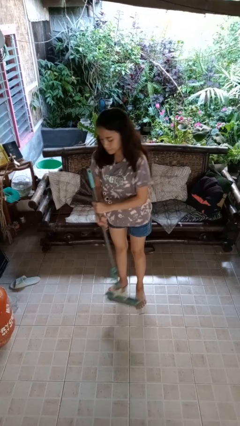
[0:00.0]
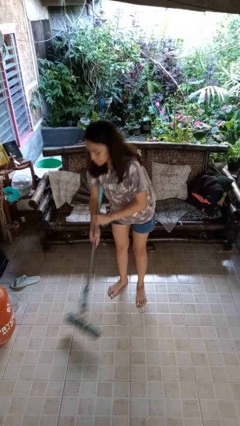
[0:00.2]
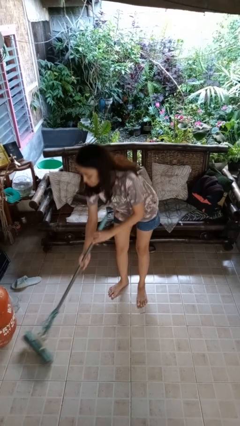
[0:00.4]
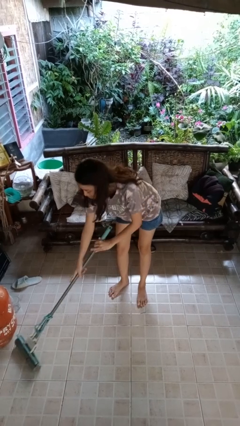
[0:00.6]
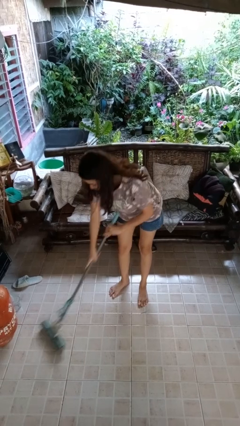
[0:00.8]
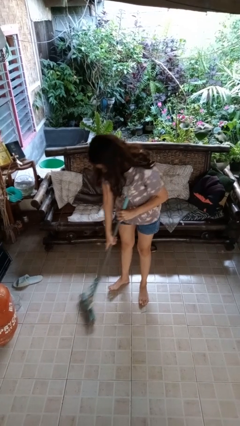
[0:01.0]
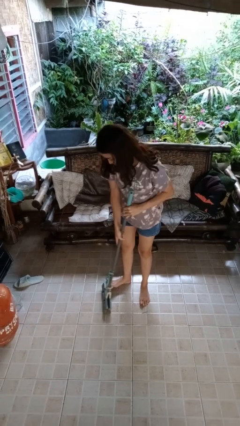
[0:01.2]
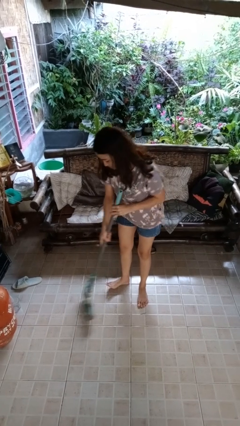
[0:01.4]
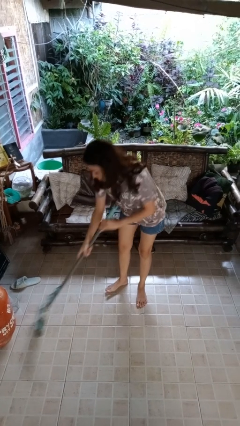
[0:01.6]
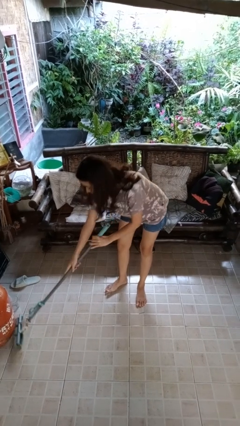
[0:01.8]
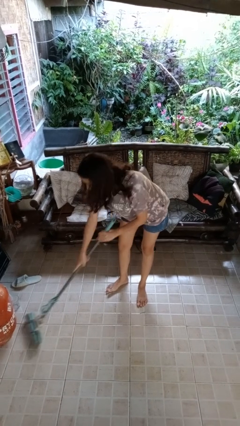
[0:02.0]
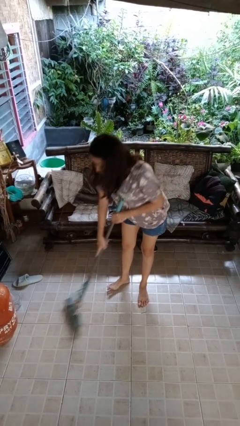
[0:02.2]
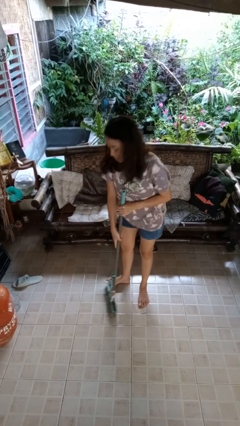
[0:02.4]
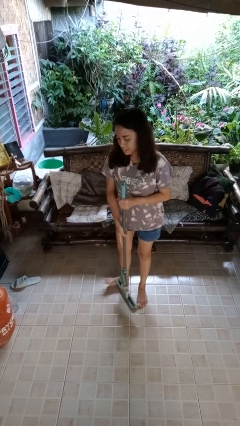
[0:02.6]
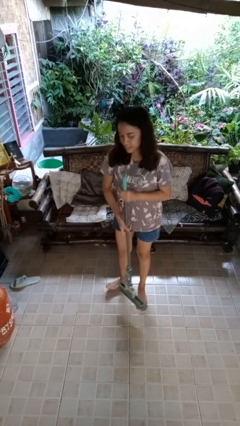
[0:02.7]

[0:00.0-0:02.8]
person mops

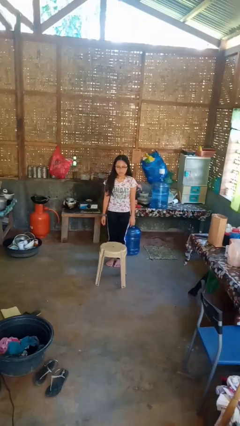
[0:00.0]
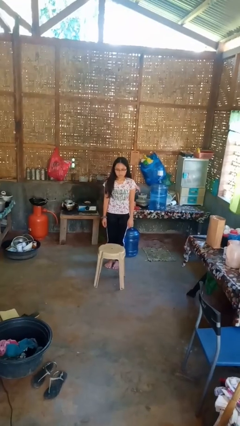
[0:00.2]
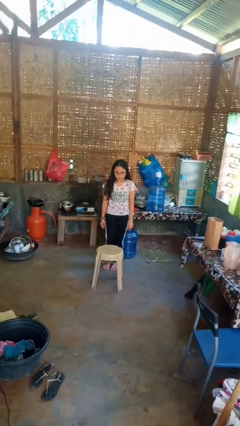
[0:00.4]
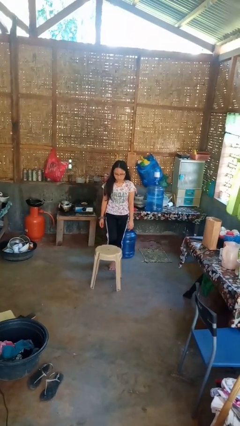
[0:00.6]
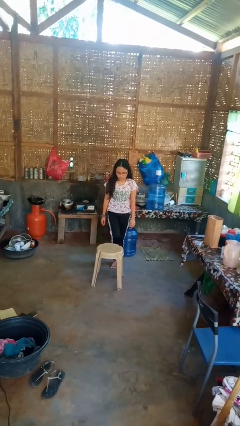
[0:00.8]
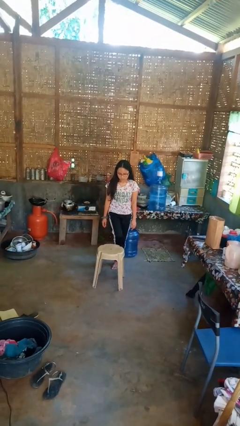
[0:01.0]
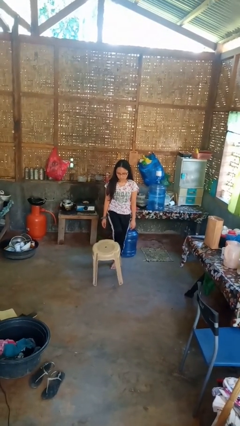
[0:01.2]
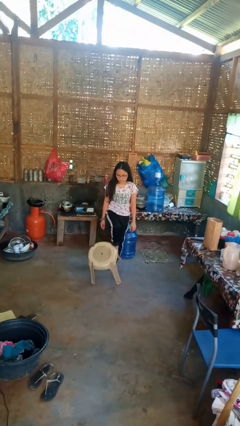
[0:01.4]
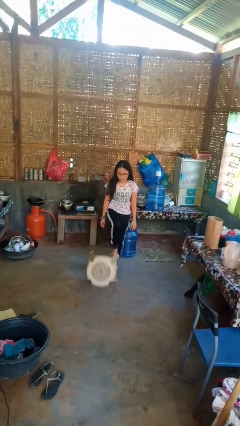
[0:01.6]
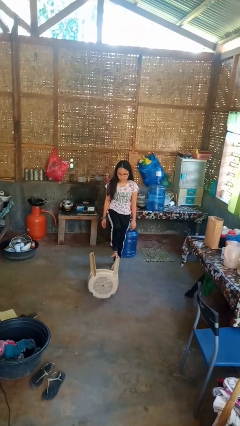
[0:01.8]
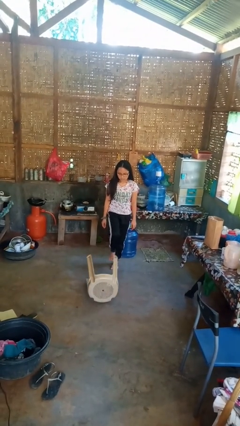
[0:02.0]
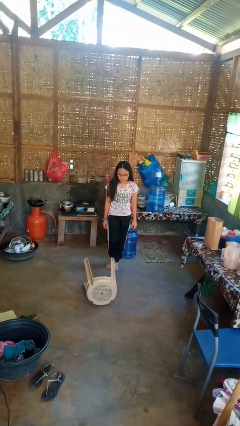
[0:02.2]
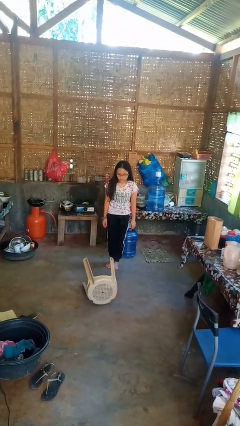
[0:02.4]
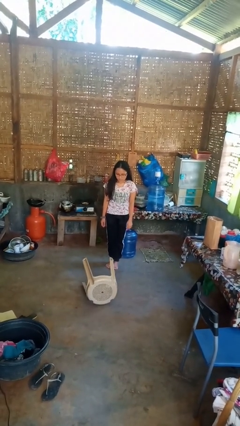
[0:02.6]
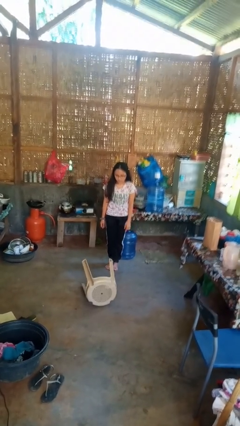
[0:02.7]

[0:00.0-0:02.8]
person knocks over furniture

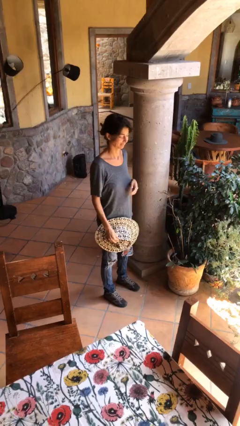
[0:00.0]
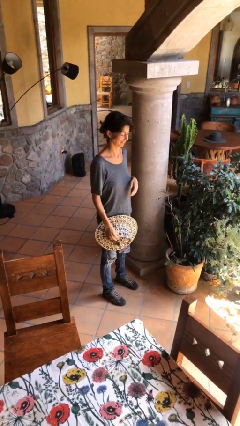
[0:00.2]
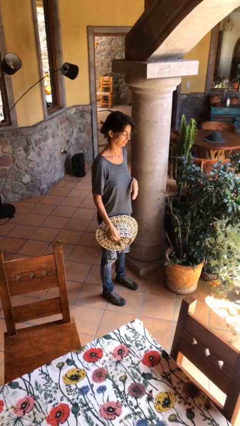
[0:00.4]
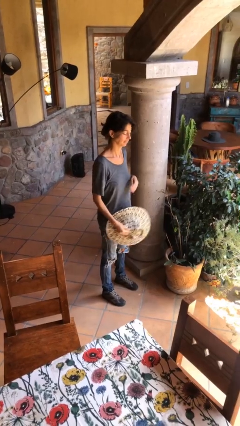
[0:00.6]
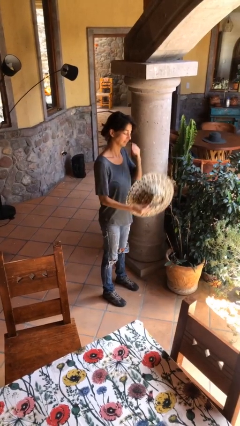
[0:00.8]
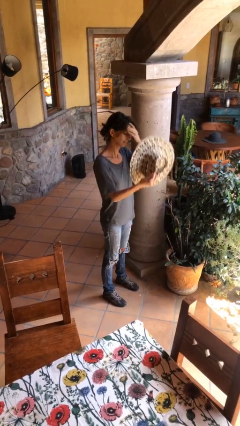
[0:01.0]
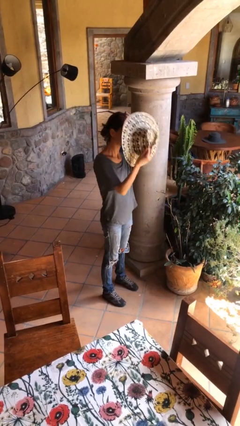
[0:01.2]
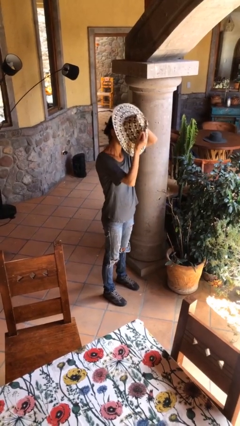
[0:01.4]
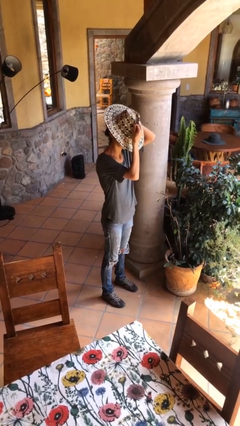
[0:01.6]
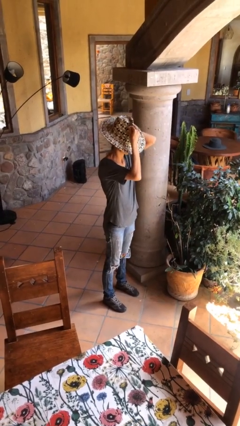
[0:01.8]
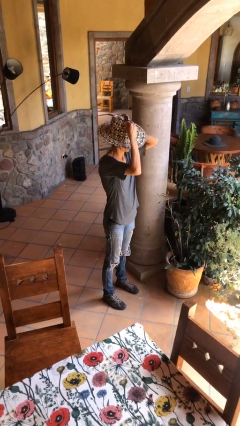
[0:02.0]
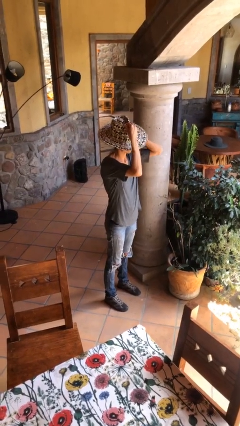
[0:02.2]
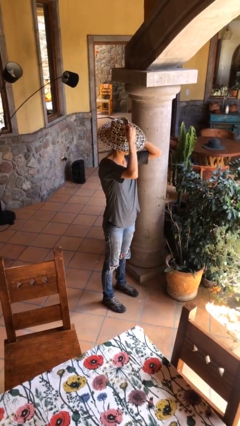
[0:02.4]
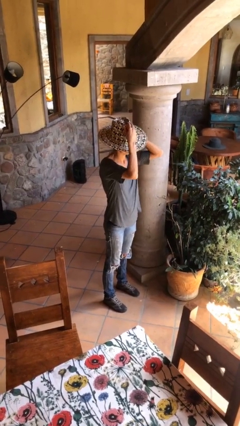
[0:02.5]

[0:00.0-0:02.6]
person puts on hat

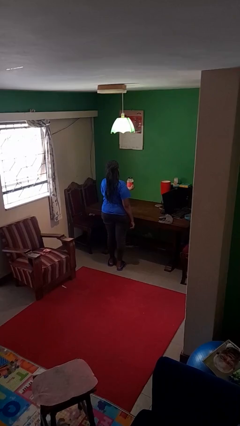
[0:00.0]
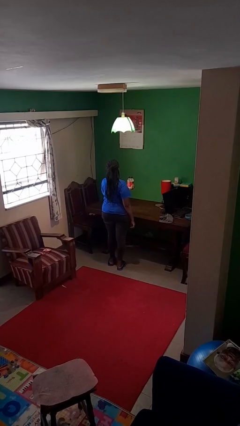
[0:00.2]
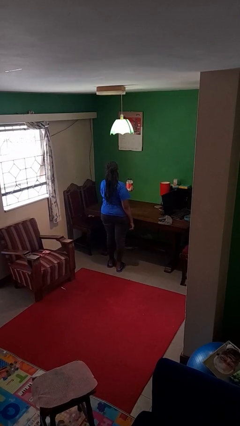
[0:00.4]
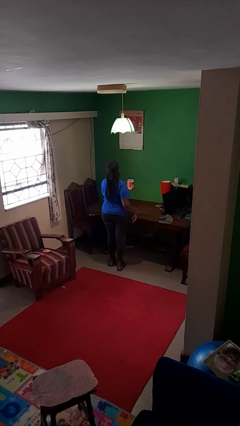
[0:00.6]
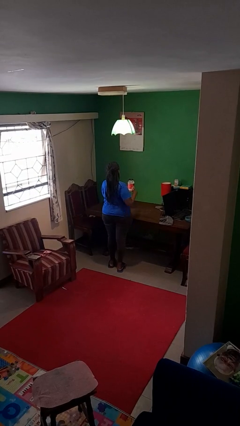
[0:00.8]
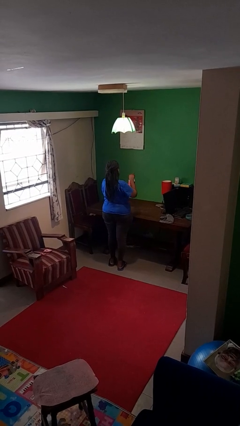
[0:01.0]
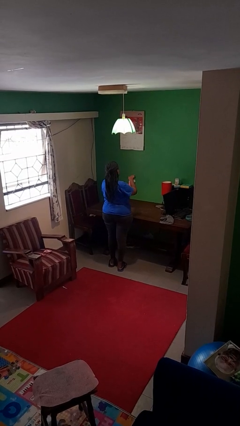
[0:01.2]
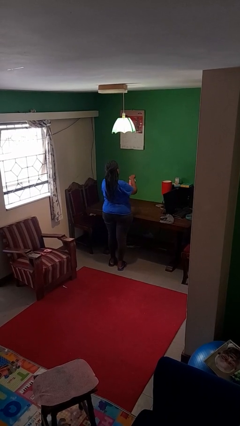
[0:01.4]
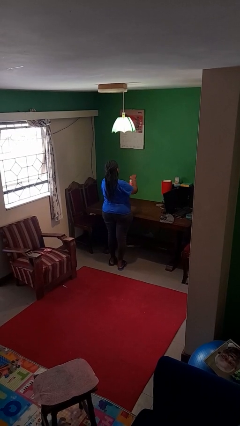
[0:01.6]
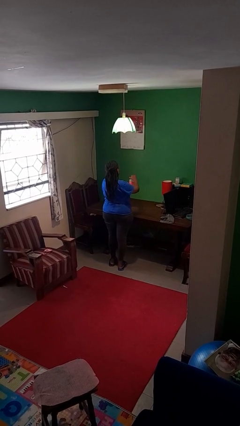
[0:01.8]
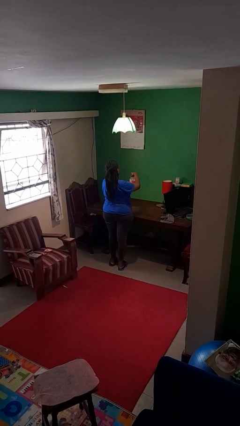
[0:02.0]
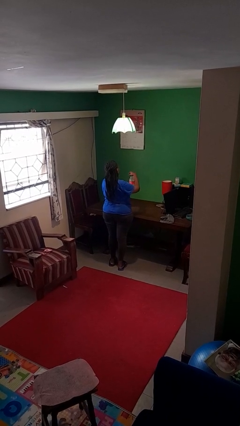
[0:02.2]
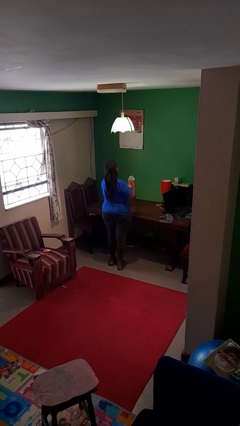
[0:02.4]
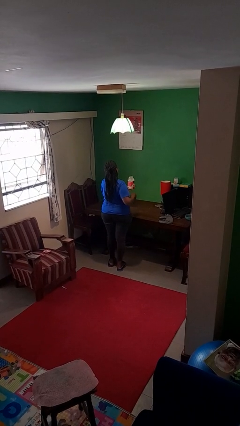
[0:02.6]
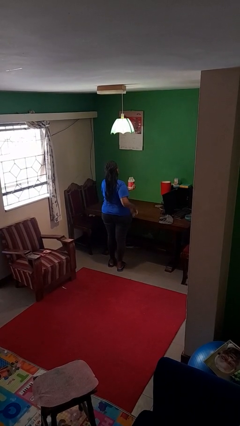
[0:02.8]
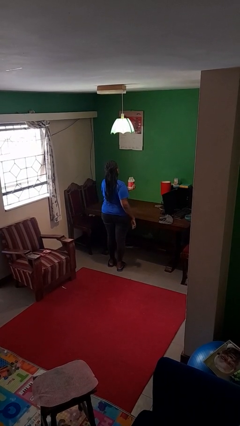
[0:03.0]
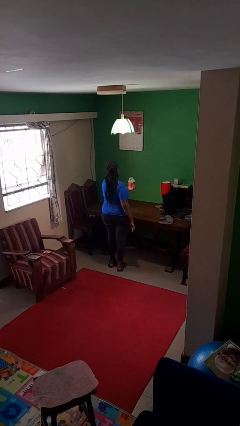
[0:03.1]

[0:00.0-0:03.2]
person opens jar

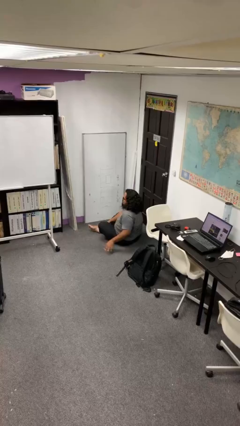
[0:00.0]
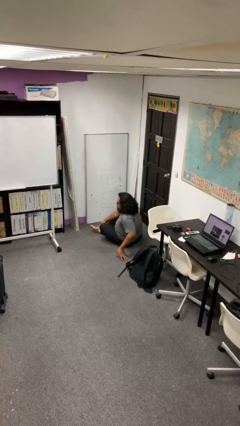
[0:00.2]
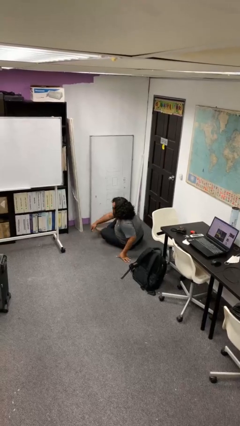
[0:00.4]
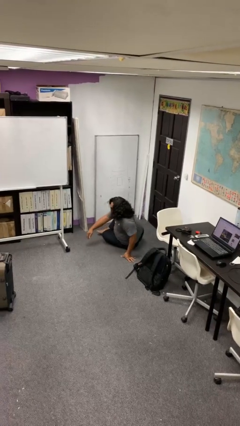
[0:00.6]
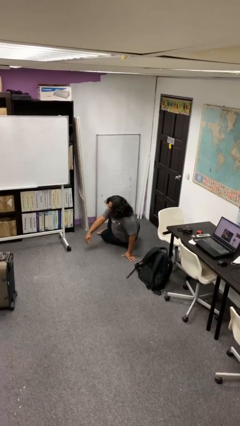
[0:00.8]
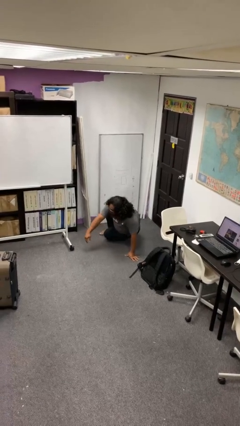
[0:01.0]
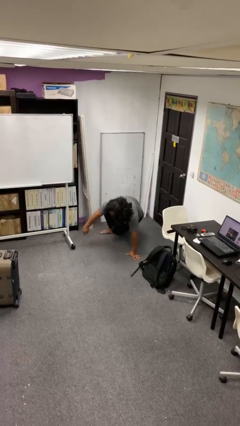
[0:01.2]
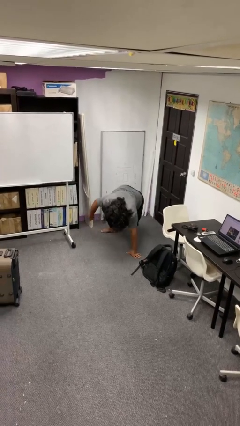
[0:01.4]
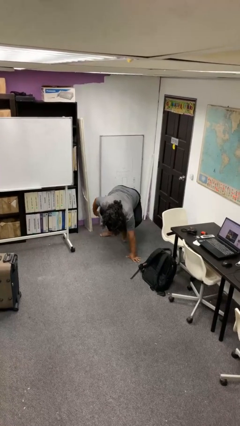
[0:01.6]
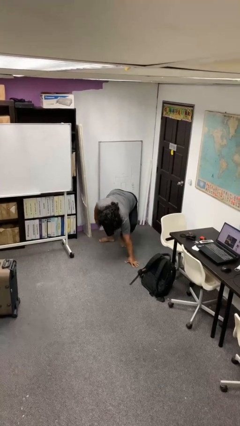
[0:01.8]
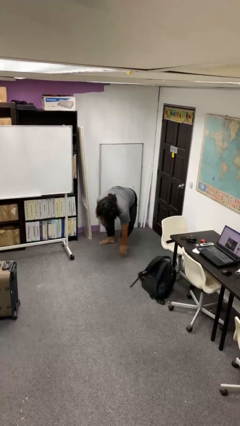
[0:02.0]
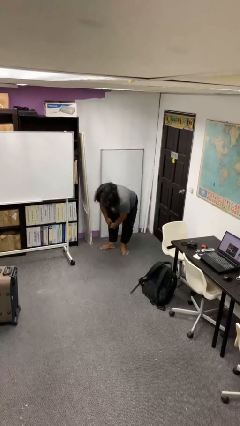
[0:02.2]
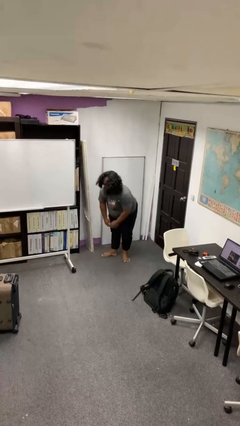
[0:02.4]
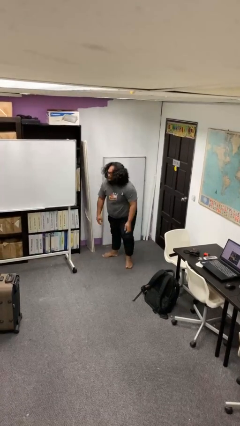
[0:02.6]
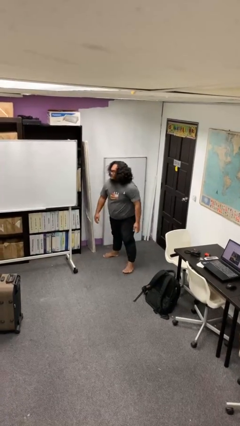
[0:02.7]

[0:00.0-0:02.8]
person stands up from floor

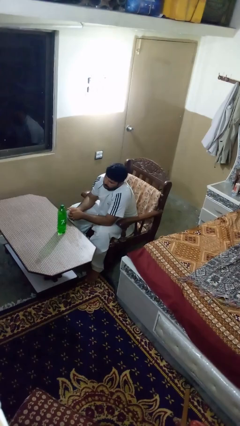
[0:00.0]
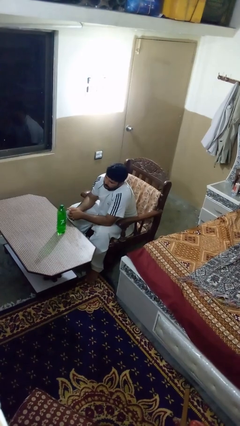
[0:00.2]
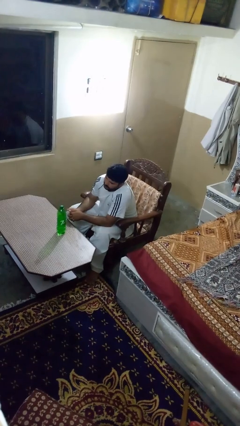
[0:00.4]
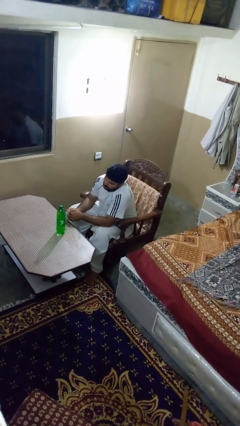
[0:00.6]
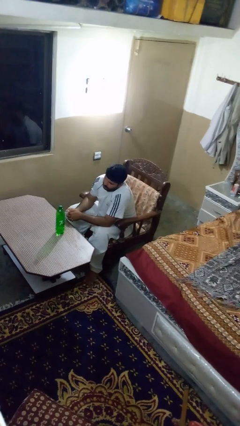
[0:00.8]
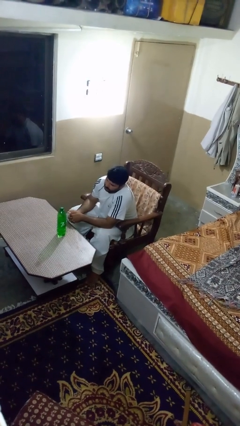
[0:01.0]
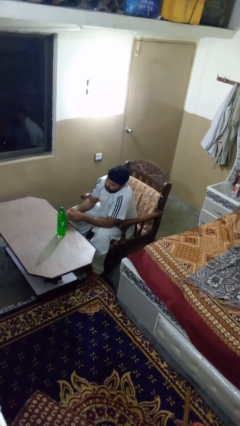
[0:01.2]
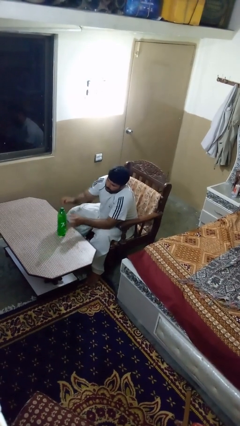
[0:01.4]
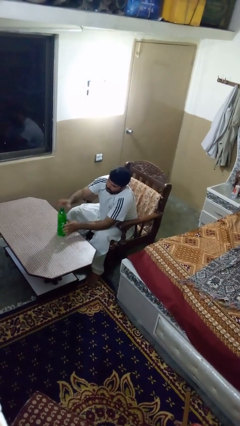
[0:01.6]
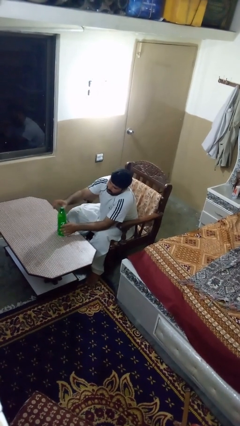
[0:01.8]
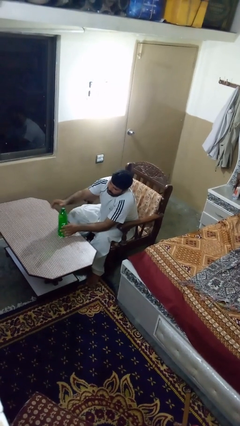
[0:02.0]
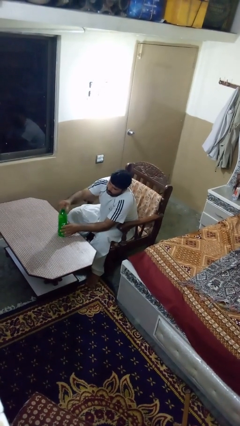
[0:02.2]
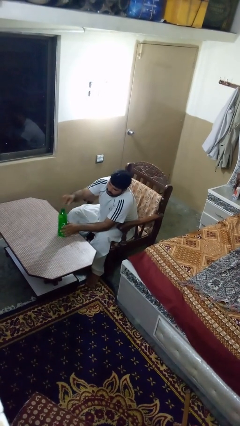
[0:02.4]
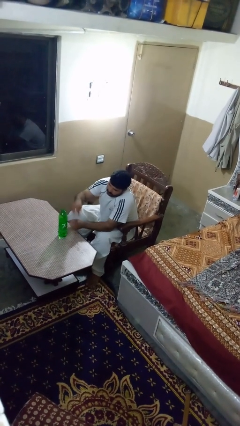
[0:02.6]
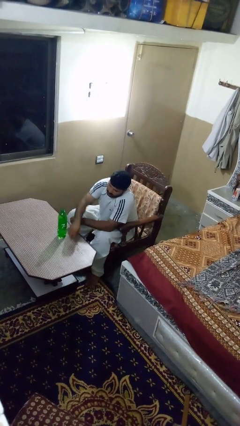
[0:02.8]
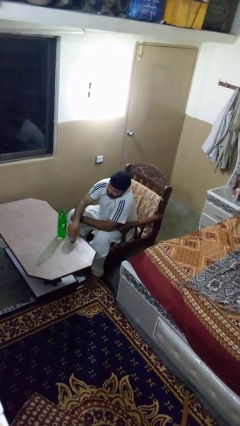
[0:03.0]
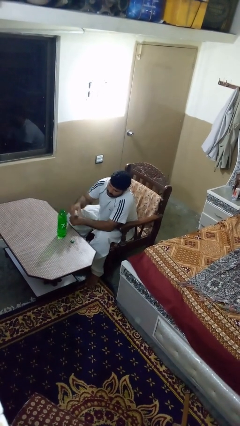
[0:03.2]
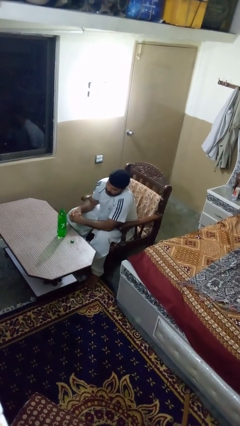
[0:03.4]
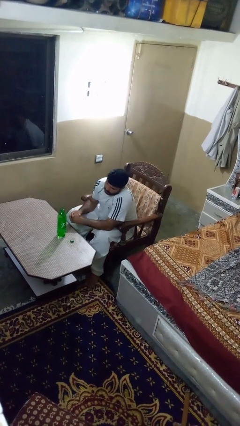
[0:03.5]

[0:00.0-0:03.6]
person unscrews lid from bottle
